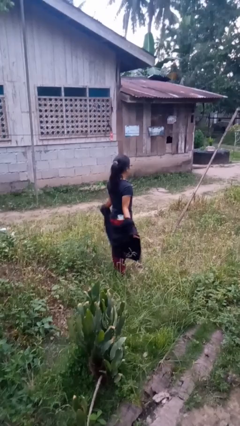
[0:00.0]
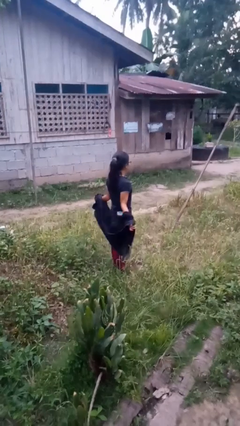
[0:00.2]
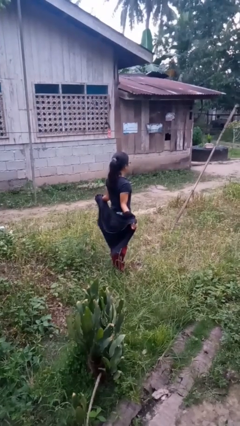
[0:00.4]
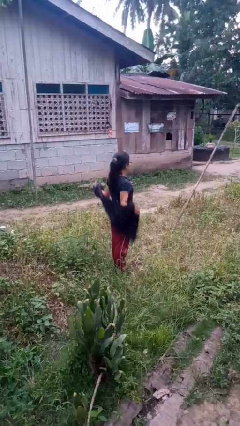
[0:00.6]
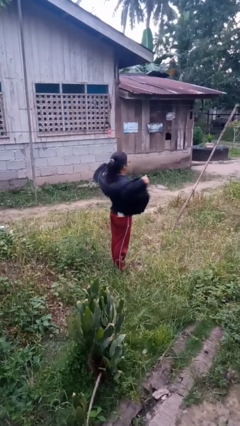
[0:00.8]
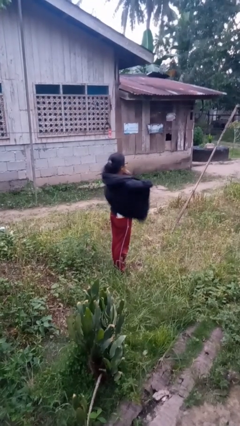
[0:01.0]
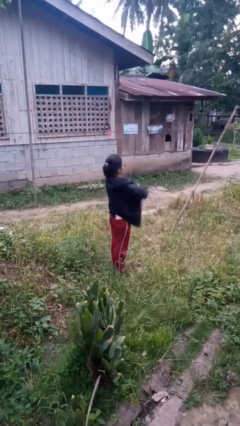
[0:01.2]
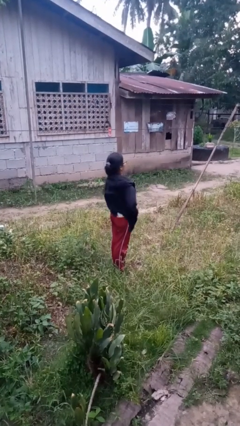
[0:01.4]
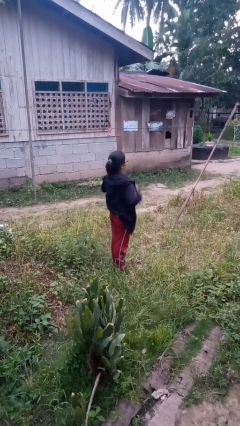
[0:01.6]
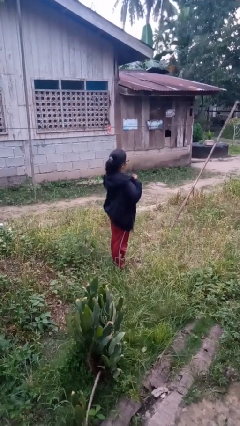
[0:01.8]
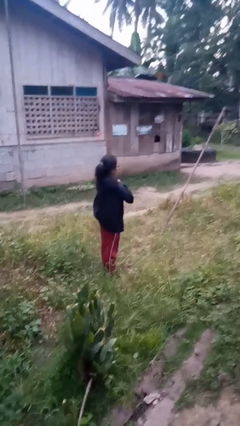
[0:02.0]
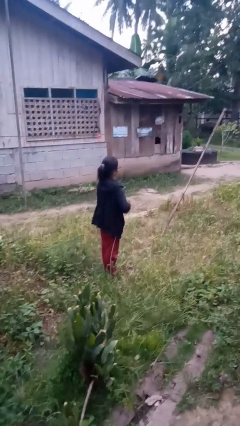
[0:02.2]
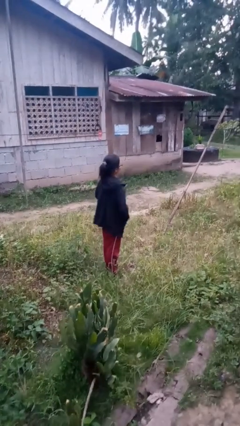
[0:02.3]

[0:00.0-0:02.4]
person puts on jacket

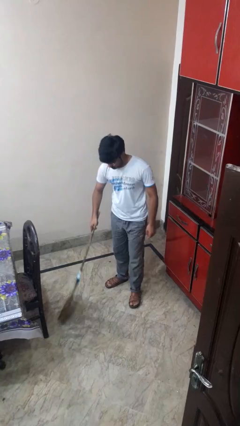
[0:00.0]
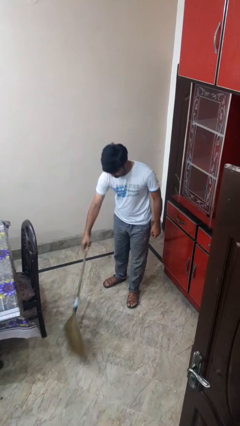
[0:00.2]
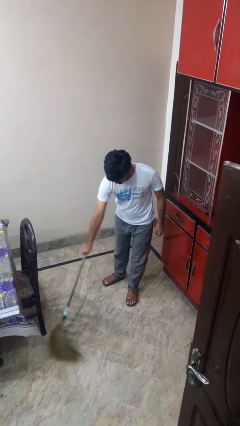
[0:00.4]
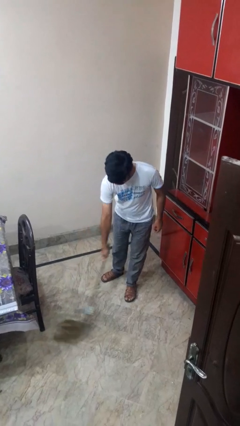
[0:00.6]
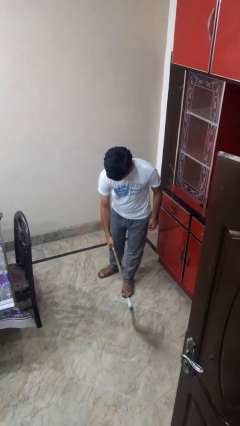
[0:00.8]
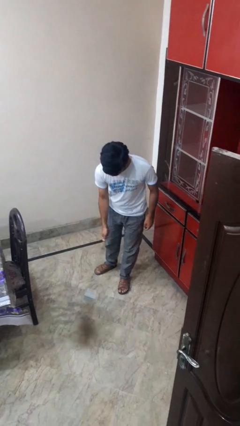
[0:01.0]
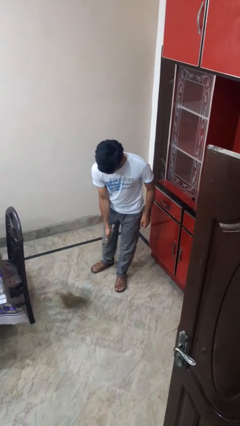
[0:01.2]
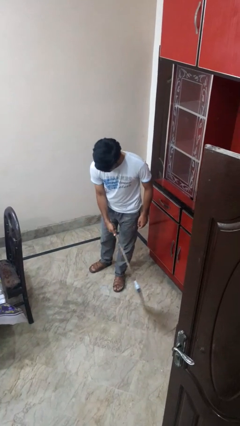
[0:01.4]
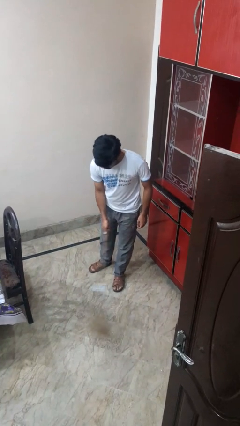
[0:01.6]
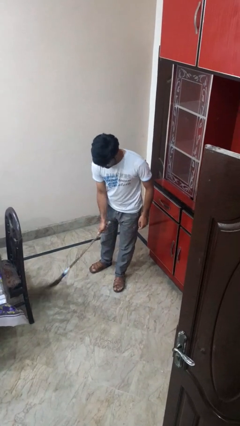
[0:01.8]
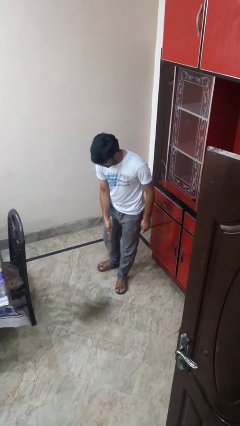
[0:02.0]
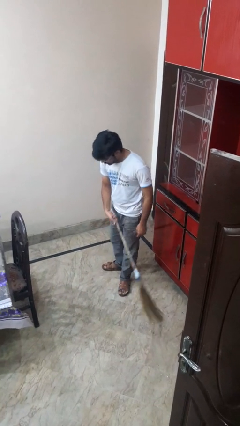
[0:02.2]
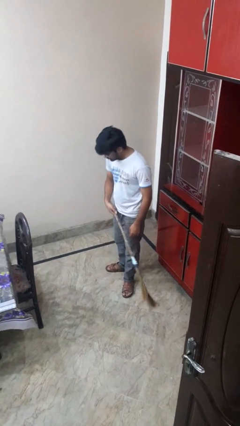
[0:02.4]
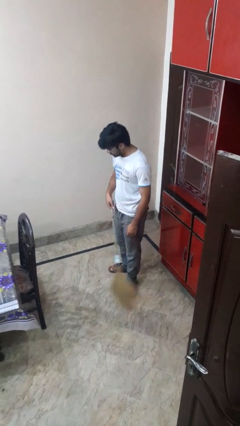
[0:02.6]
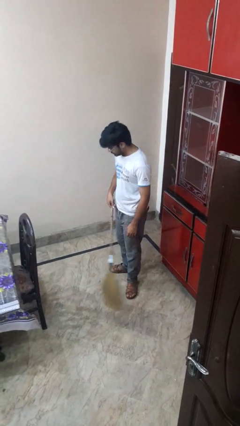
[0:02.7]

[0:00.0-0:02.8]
person sweeps floor

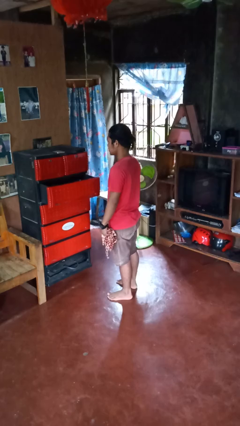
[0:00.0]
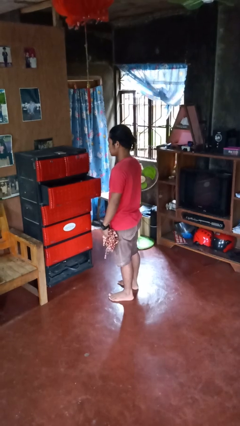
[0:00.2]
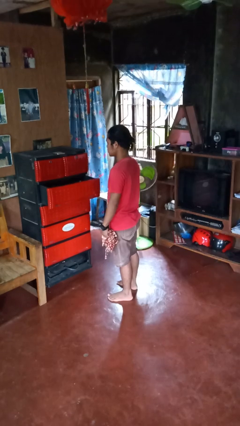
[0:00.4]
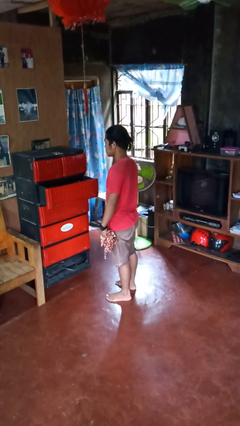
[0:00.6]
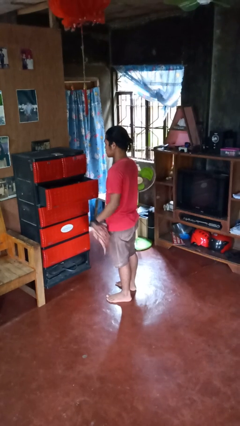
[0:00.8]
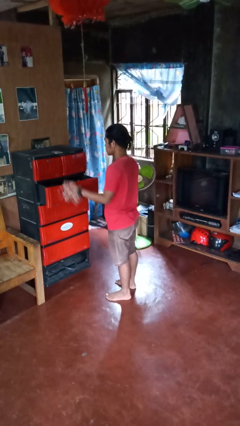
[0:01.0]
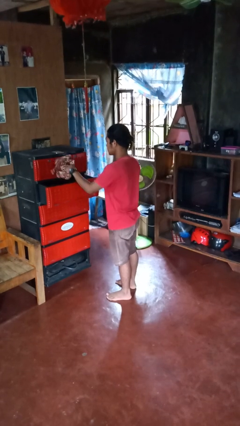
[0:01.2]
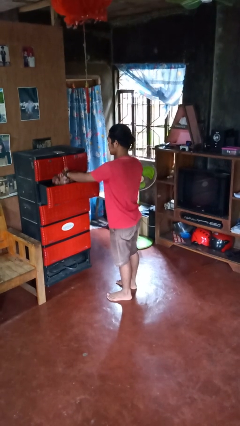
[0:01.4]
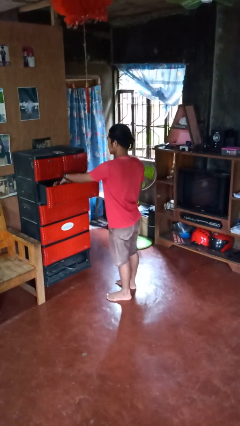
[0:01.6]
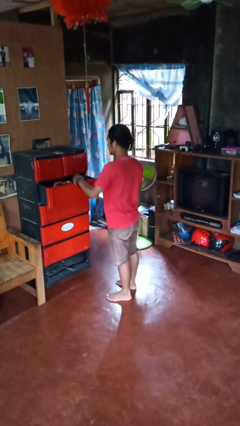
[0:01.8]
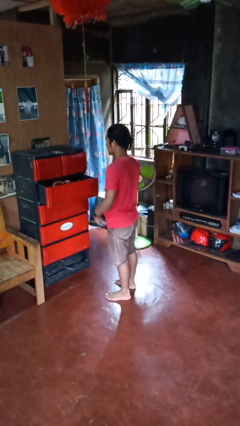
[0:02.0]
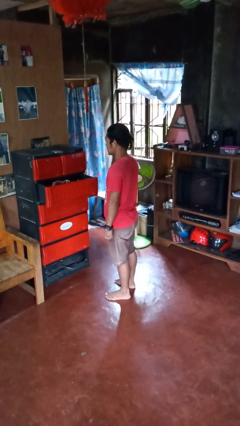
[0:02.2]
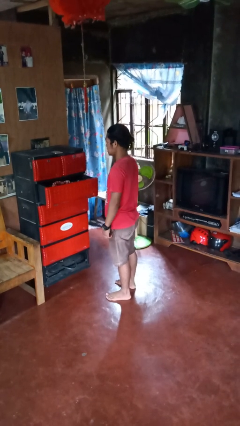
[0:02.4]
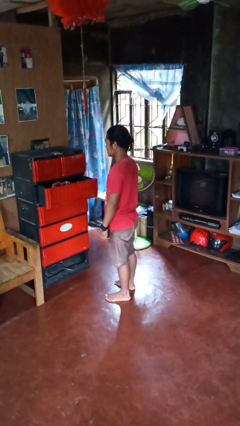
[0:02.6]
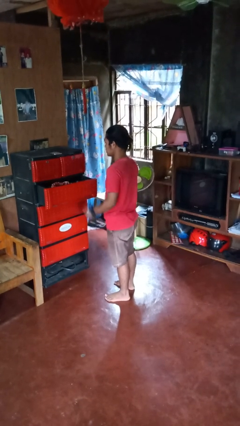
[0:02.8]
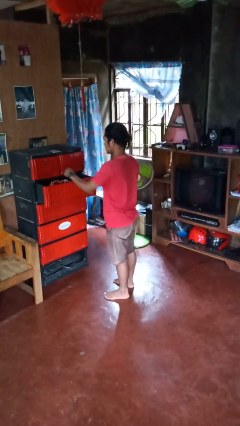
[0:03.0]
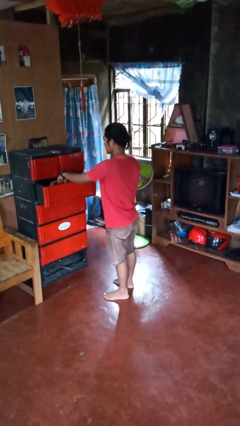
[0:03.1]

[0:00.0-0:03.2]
person puts clothes into dresser

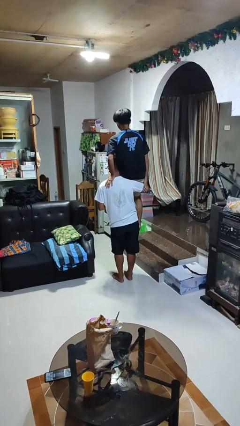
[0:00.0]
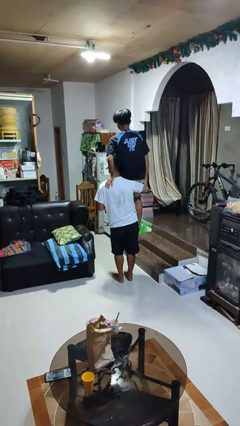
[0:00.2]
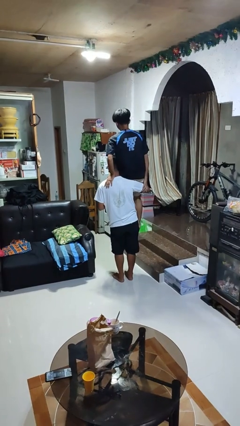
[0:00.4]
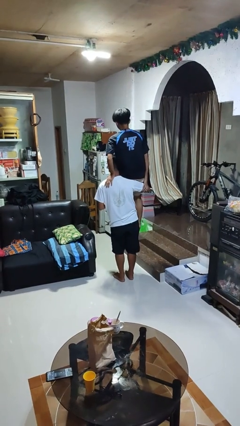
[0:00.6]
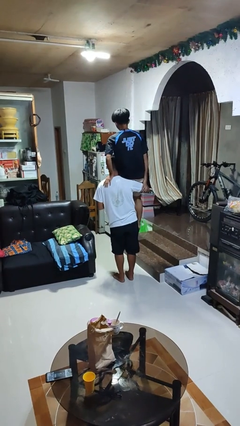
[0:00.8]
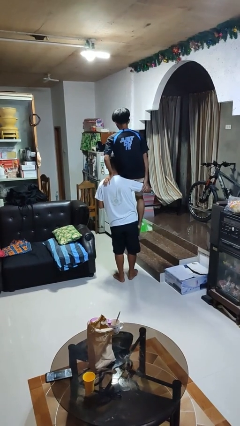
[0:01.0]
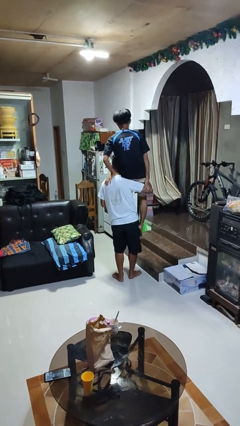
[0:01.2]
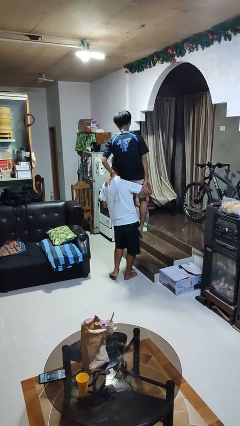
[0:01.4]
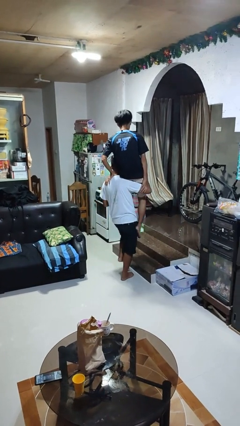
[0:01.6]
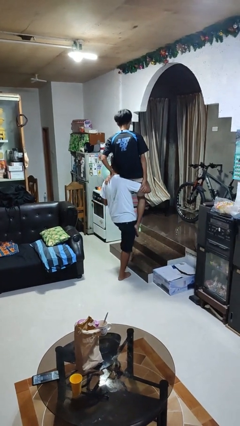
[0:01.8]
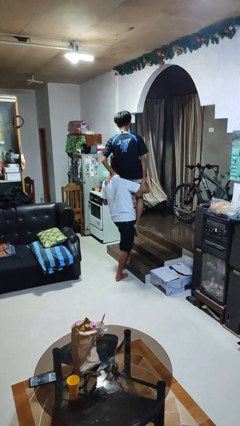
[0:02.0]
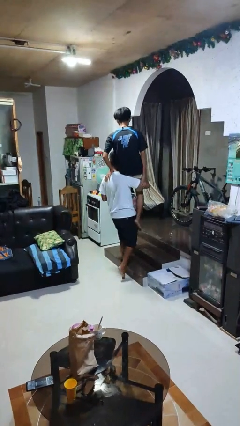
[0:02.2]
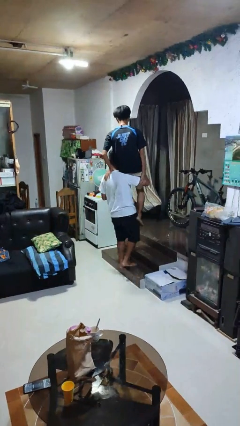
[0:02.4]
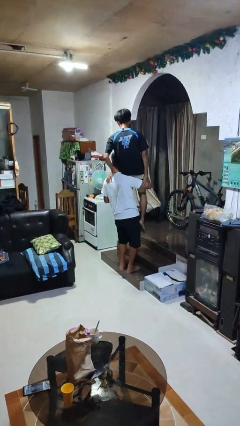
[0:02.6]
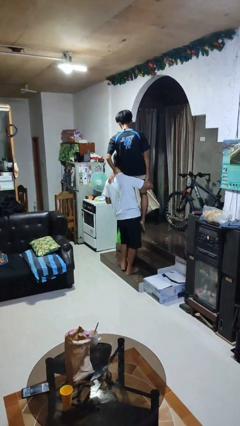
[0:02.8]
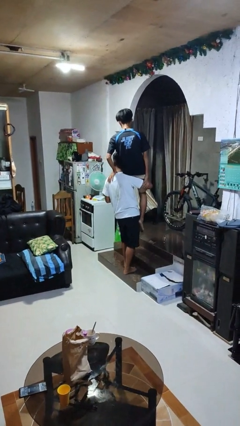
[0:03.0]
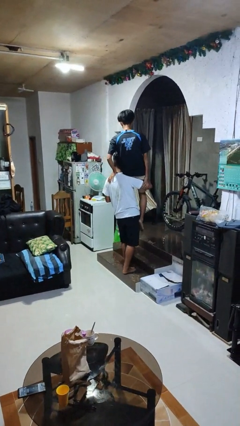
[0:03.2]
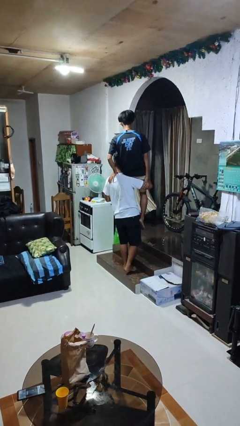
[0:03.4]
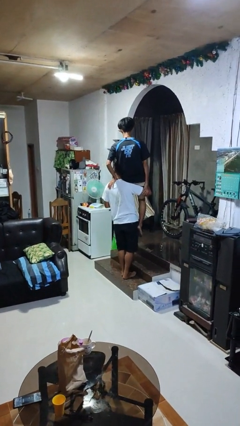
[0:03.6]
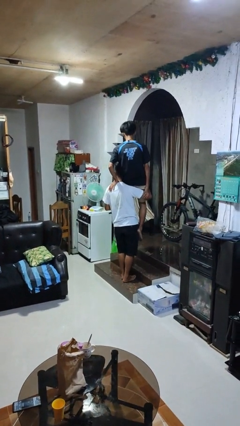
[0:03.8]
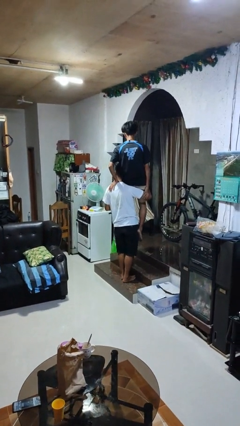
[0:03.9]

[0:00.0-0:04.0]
person carries person on shoulders

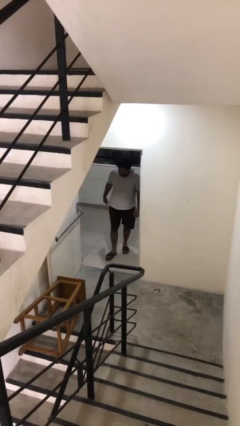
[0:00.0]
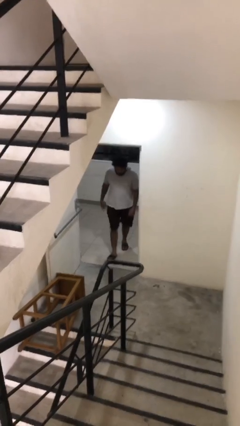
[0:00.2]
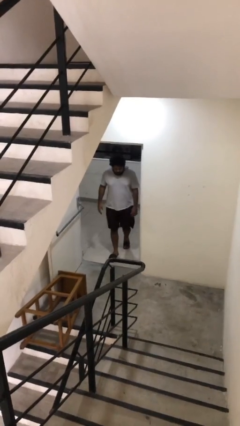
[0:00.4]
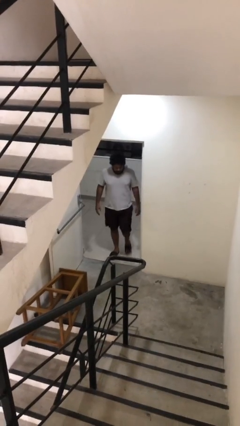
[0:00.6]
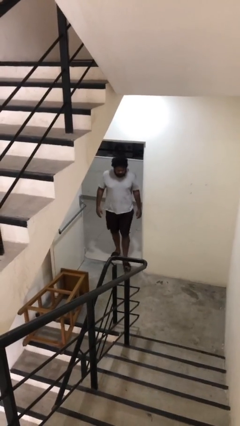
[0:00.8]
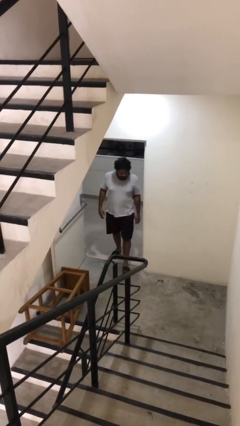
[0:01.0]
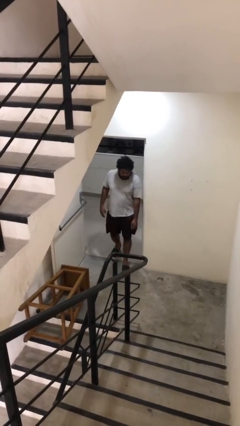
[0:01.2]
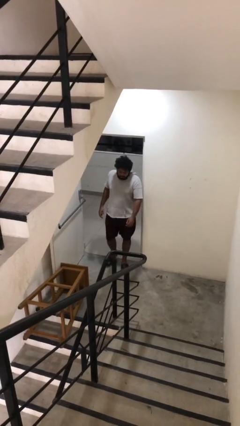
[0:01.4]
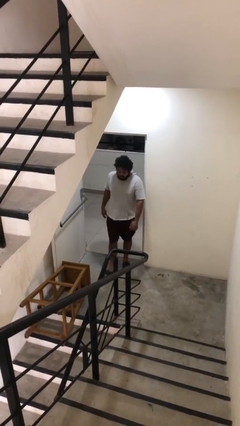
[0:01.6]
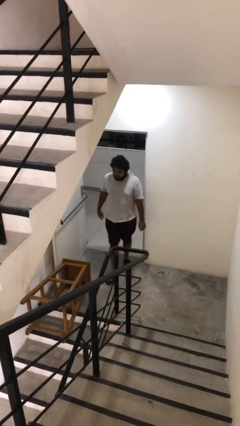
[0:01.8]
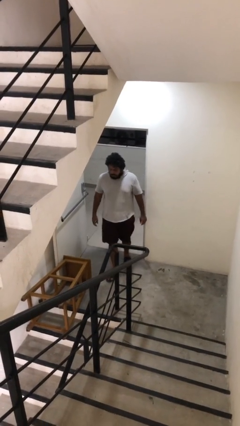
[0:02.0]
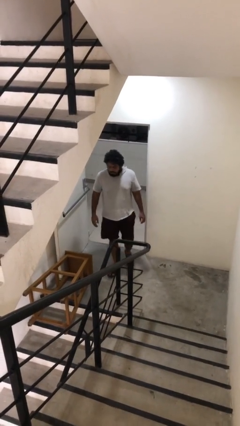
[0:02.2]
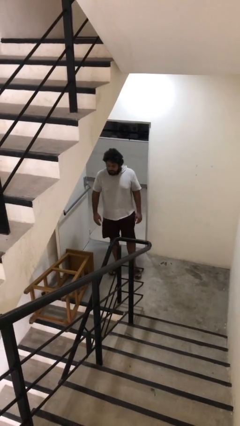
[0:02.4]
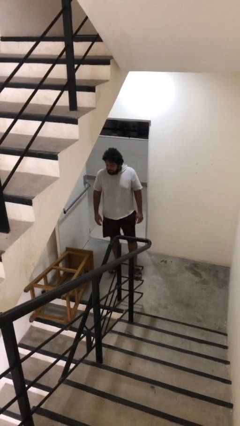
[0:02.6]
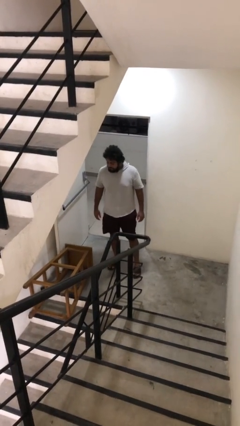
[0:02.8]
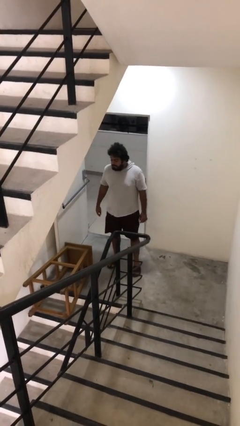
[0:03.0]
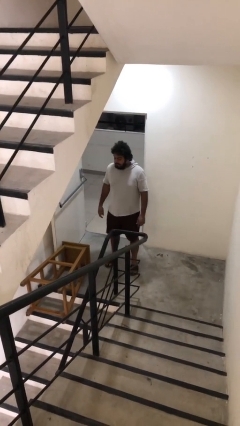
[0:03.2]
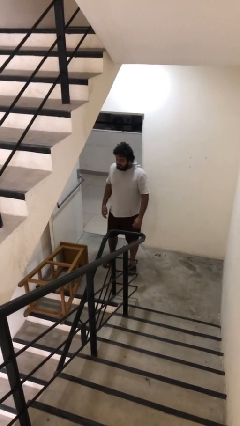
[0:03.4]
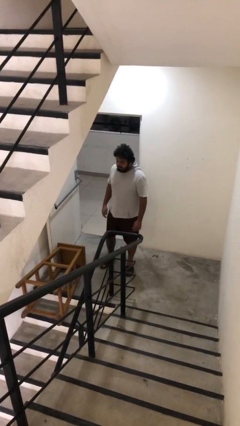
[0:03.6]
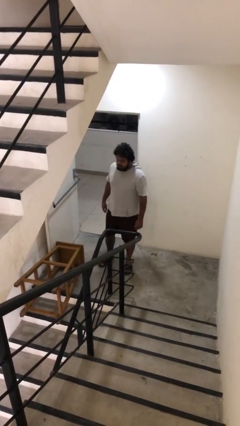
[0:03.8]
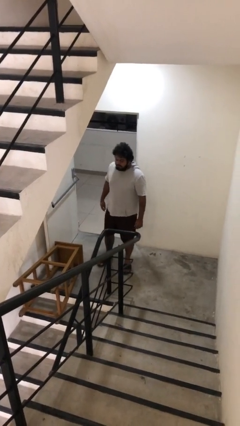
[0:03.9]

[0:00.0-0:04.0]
person enters scene through structure

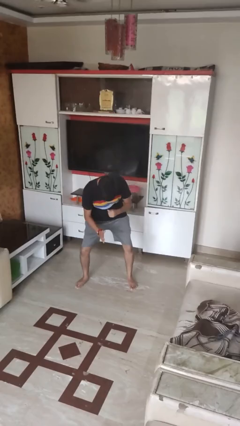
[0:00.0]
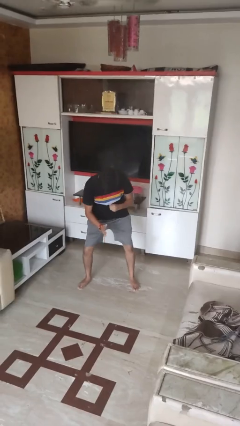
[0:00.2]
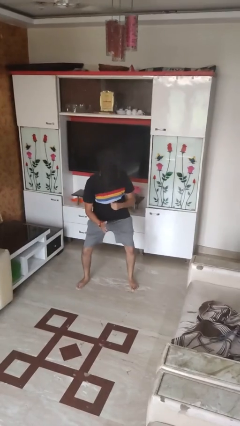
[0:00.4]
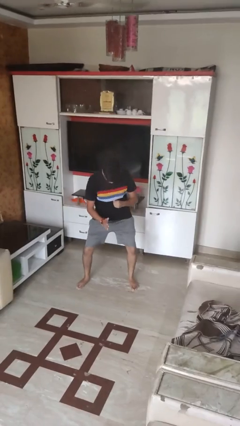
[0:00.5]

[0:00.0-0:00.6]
person karate chop

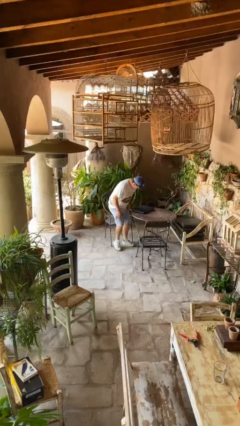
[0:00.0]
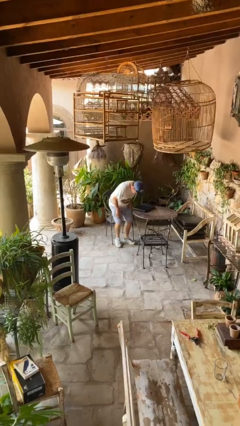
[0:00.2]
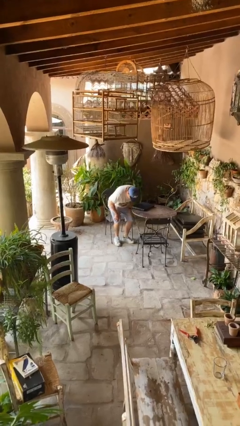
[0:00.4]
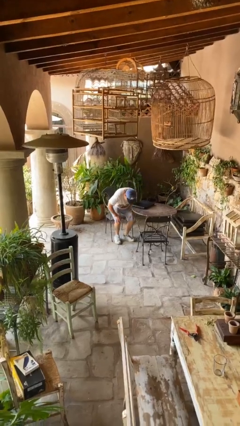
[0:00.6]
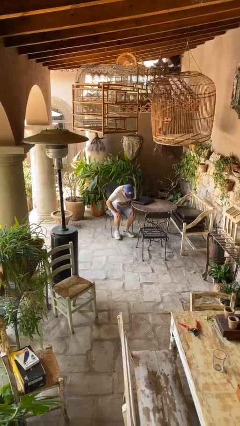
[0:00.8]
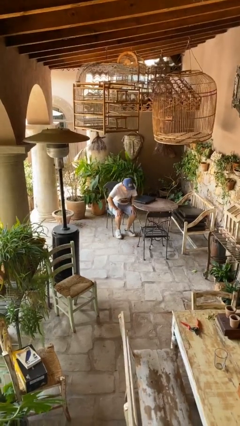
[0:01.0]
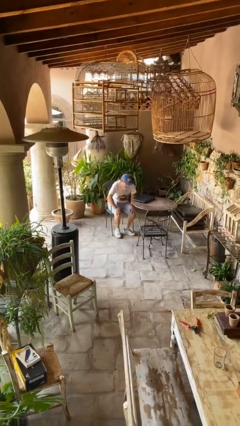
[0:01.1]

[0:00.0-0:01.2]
person sits down
